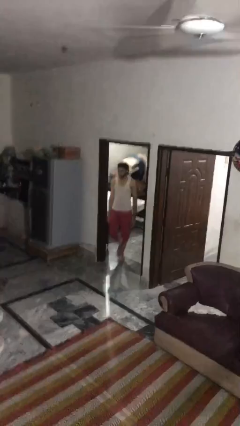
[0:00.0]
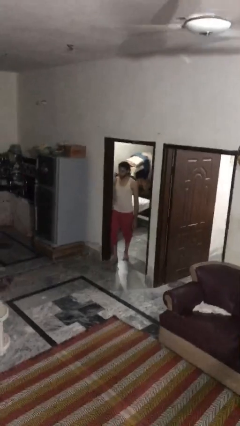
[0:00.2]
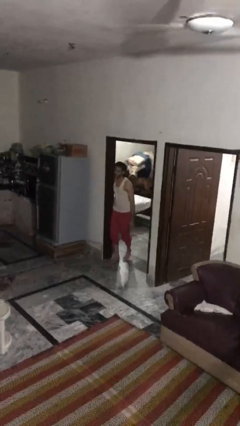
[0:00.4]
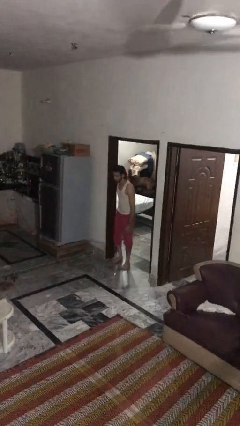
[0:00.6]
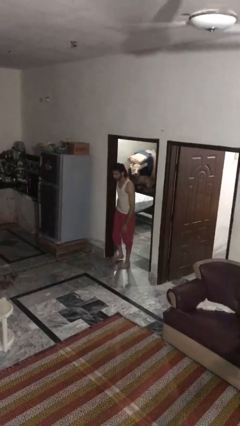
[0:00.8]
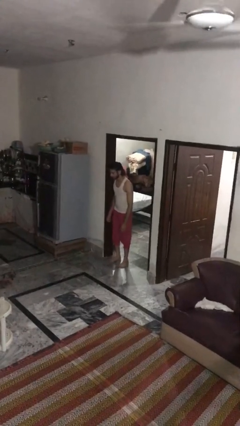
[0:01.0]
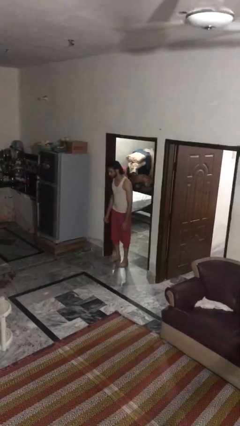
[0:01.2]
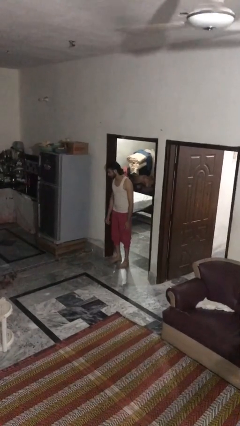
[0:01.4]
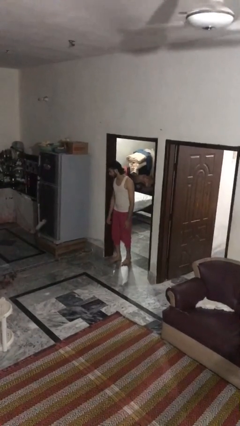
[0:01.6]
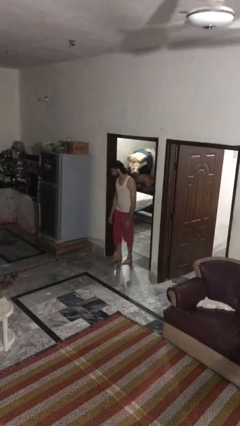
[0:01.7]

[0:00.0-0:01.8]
person bumps into wall

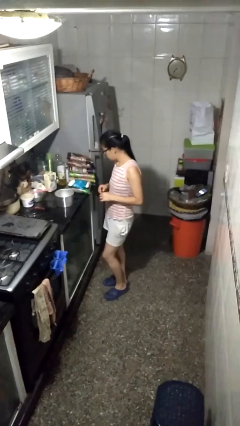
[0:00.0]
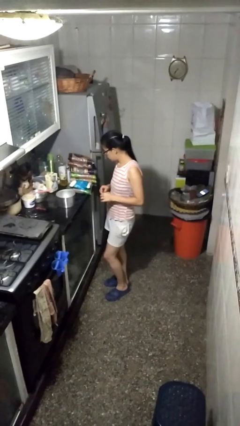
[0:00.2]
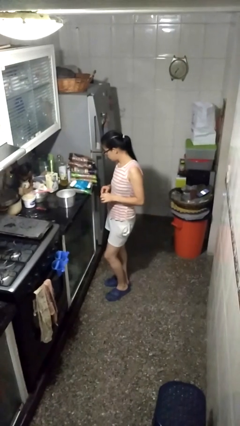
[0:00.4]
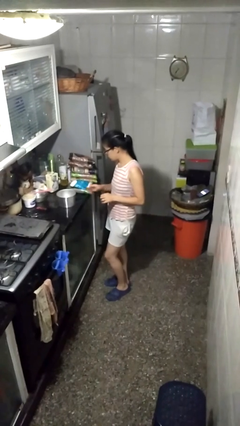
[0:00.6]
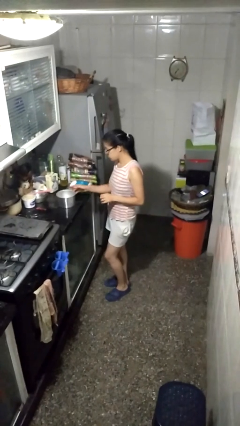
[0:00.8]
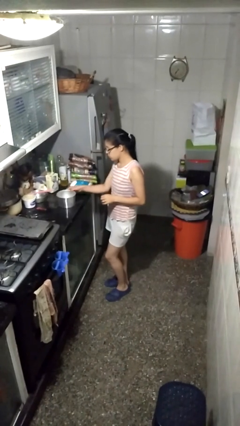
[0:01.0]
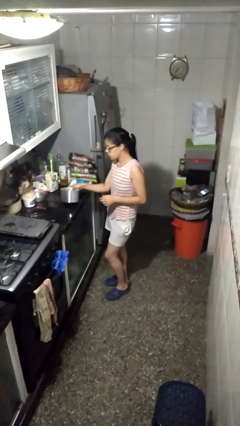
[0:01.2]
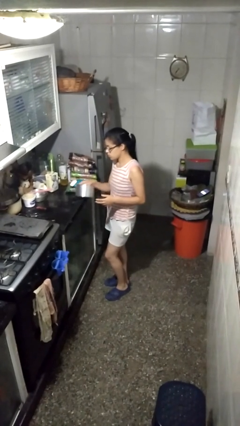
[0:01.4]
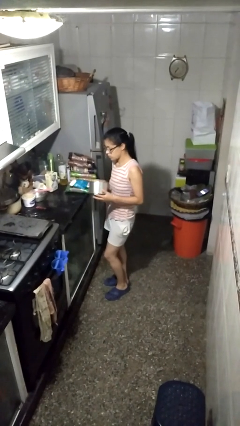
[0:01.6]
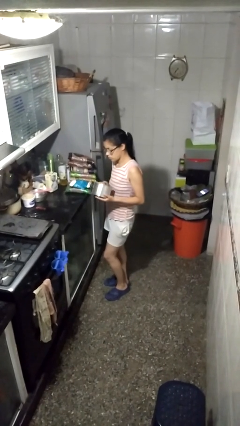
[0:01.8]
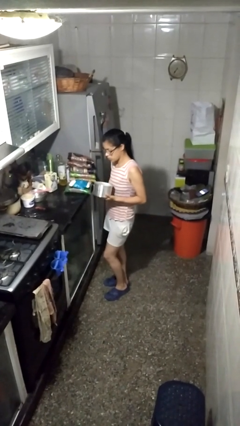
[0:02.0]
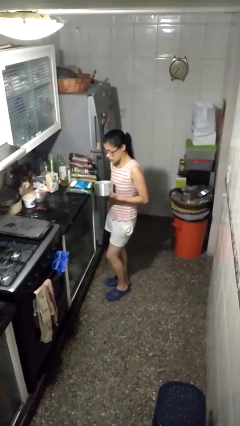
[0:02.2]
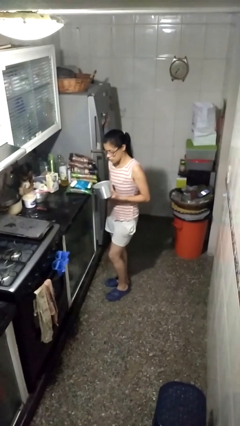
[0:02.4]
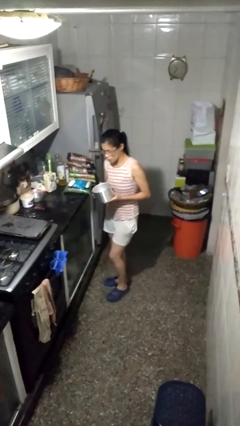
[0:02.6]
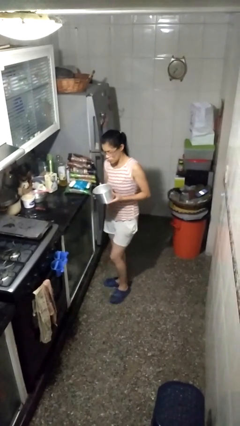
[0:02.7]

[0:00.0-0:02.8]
person picks up object from countertop

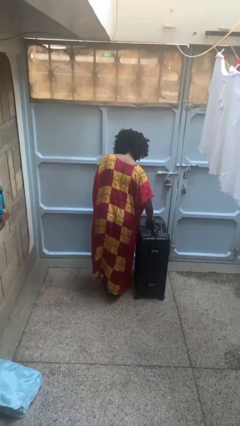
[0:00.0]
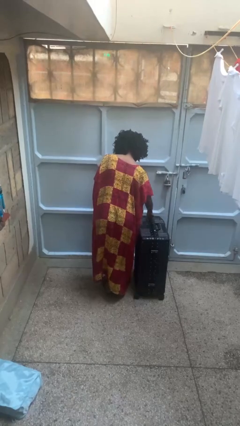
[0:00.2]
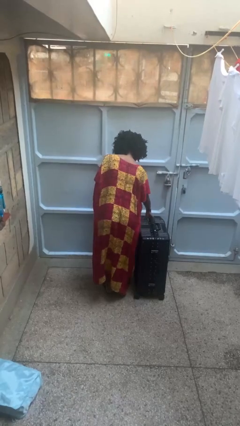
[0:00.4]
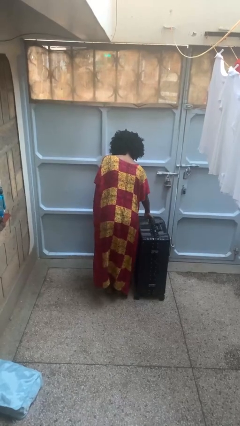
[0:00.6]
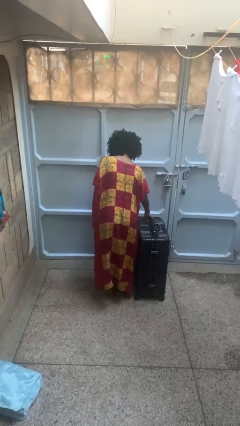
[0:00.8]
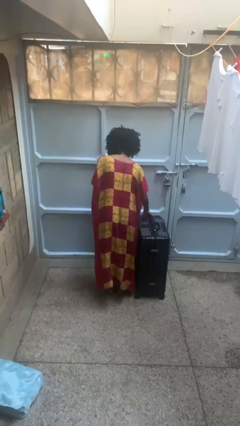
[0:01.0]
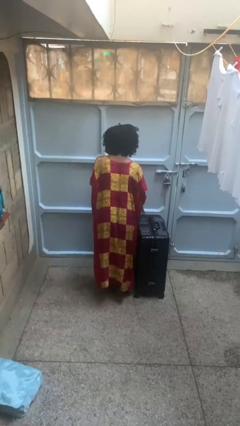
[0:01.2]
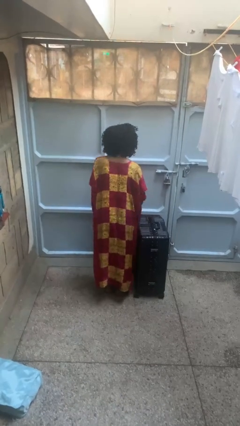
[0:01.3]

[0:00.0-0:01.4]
person closes suitcase

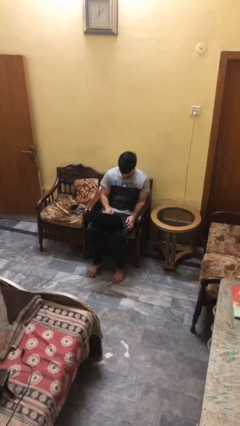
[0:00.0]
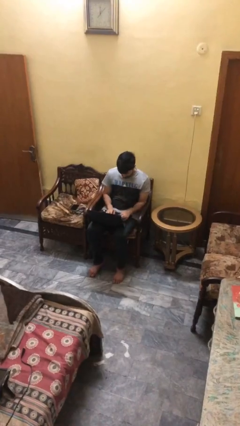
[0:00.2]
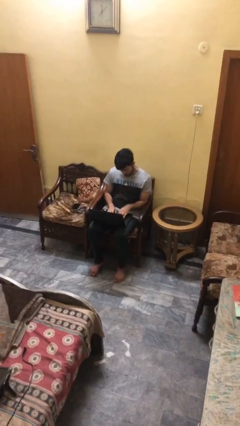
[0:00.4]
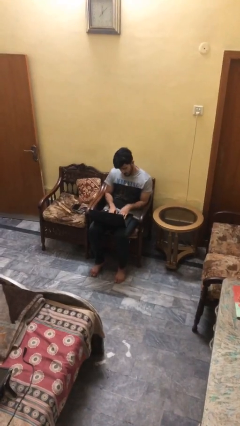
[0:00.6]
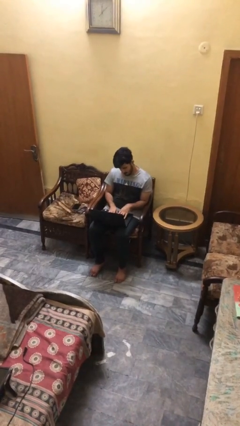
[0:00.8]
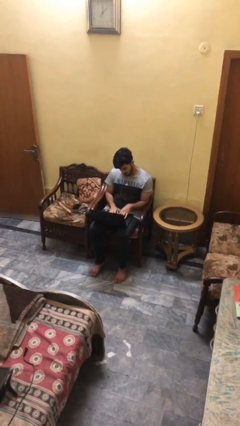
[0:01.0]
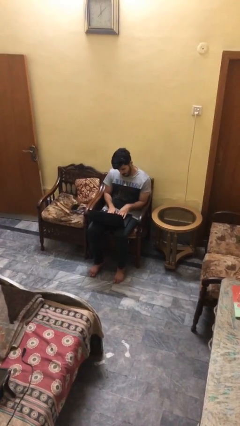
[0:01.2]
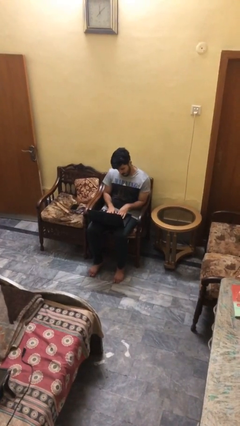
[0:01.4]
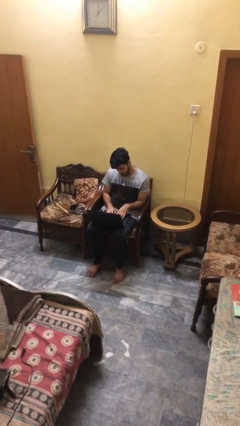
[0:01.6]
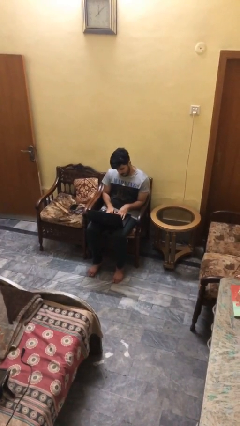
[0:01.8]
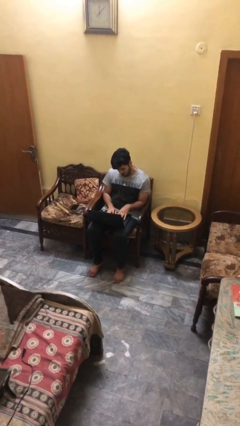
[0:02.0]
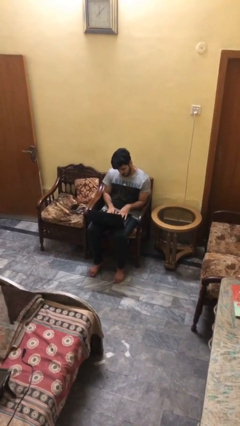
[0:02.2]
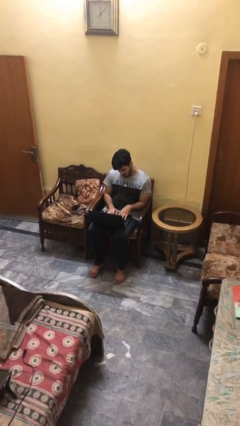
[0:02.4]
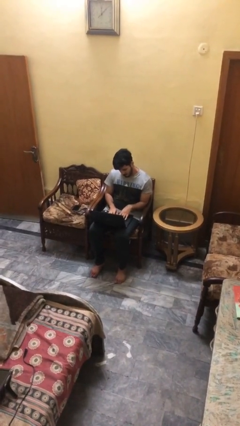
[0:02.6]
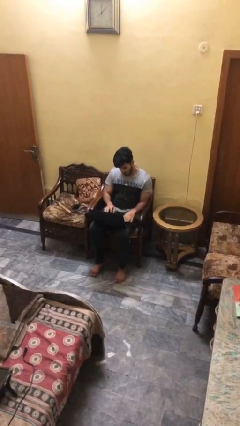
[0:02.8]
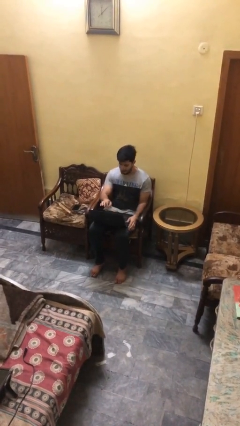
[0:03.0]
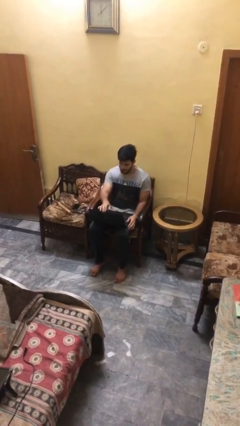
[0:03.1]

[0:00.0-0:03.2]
person interacts with laptop

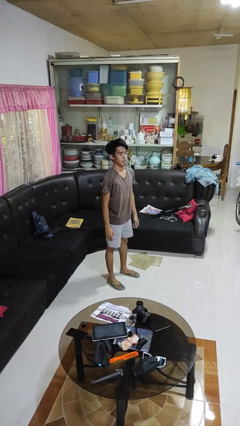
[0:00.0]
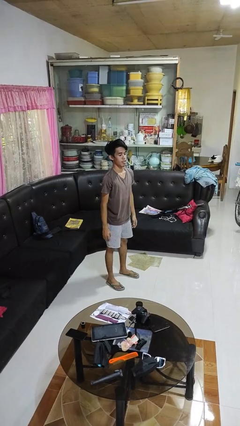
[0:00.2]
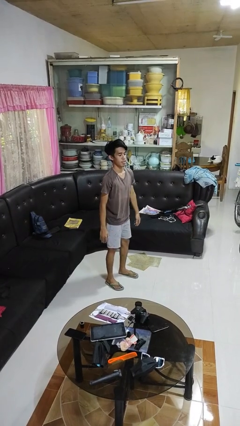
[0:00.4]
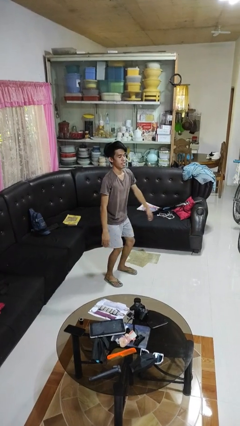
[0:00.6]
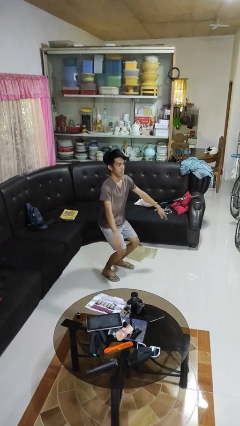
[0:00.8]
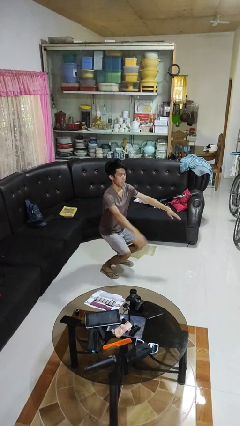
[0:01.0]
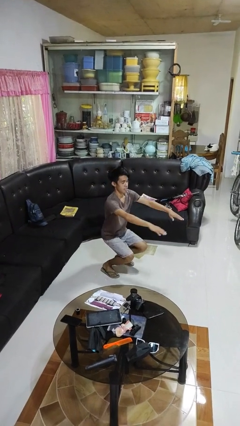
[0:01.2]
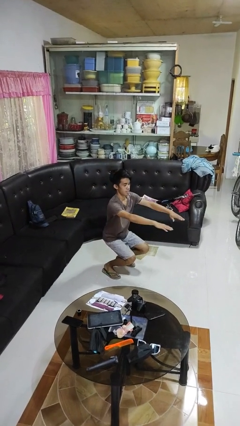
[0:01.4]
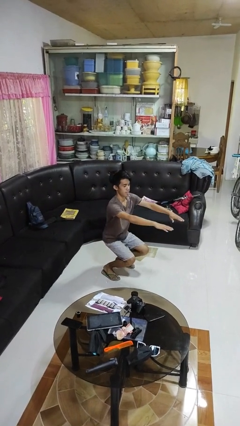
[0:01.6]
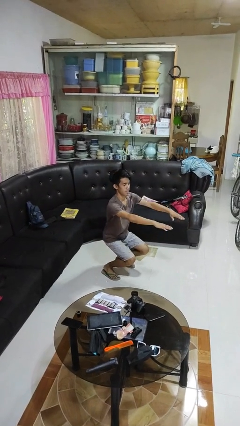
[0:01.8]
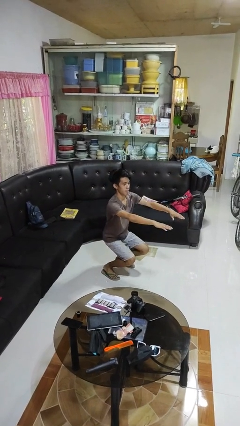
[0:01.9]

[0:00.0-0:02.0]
person squats

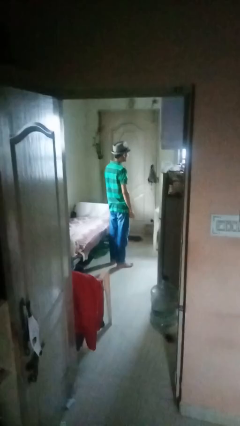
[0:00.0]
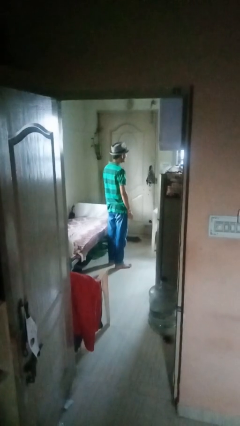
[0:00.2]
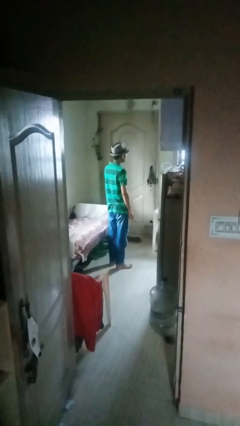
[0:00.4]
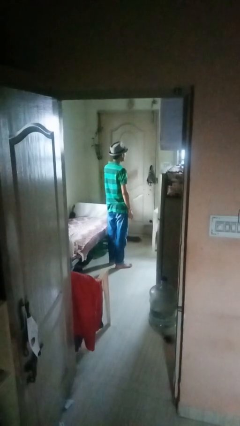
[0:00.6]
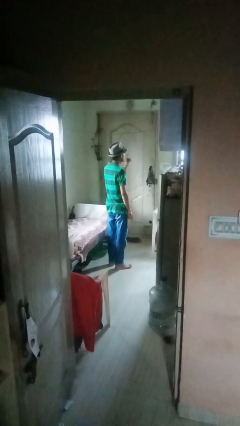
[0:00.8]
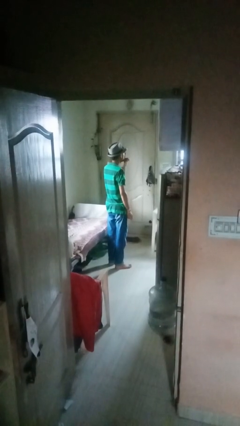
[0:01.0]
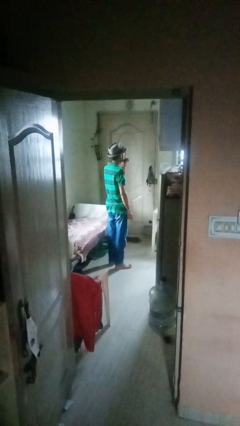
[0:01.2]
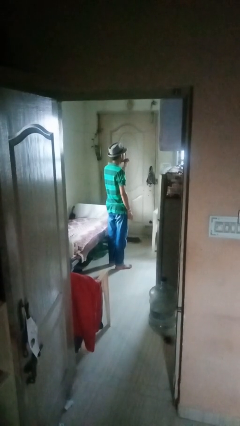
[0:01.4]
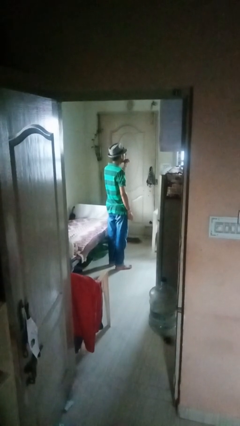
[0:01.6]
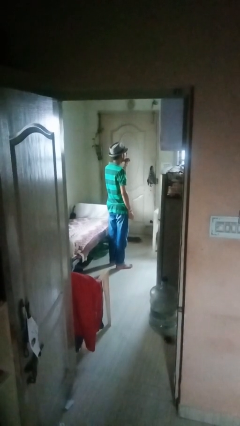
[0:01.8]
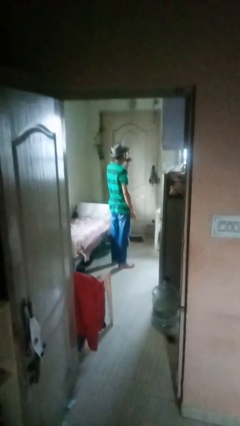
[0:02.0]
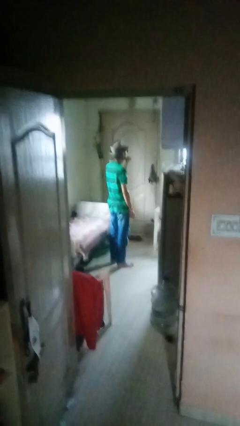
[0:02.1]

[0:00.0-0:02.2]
person gestures be quiet

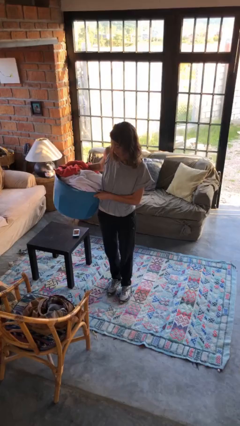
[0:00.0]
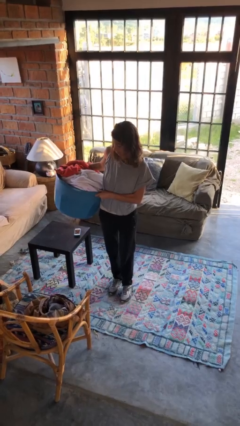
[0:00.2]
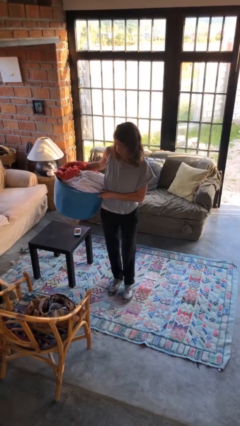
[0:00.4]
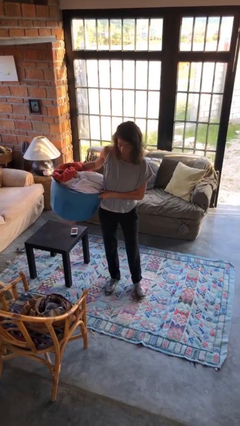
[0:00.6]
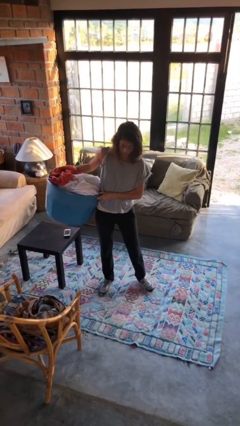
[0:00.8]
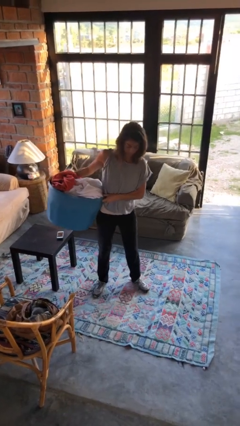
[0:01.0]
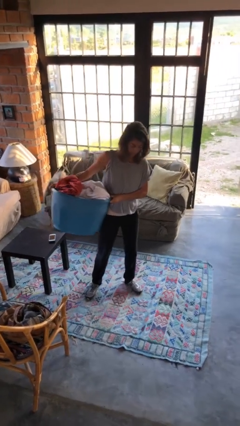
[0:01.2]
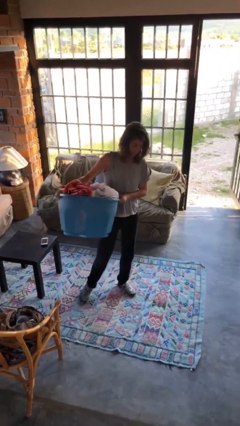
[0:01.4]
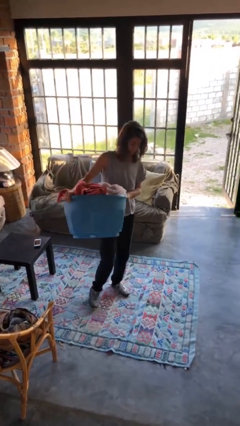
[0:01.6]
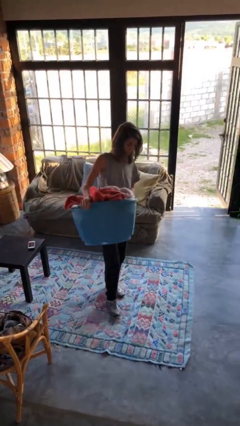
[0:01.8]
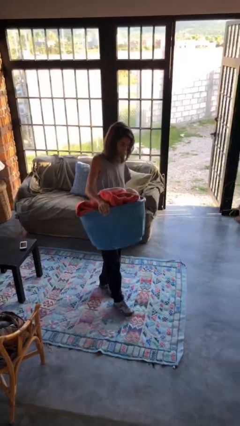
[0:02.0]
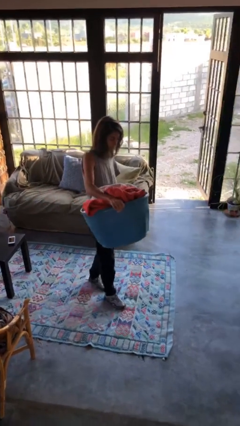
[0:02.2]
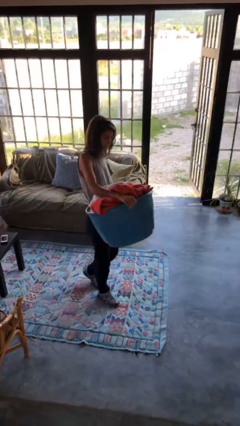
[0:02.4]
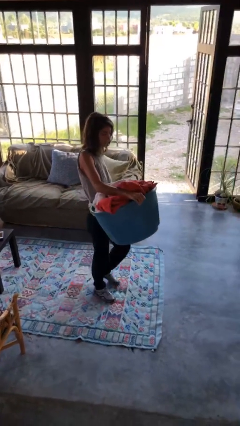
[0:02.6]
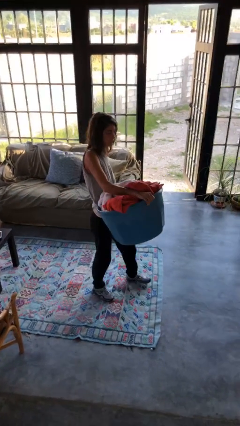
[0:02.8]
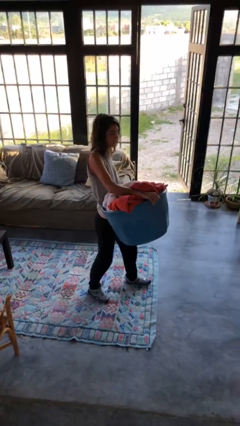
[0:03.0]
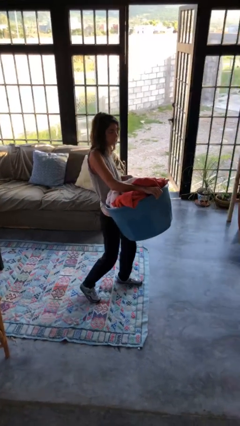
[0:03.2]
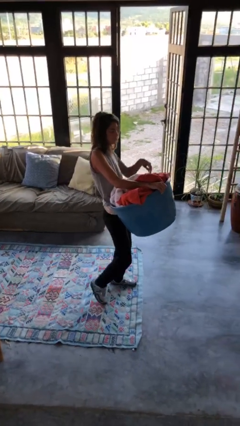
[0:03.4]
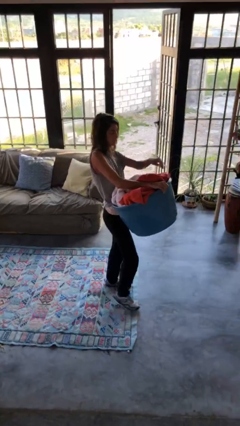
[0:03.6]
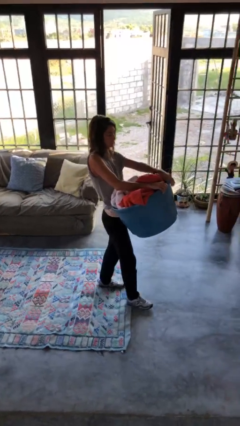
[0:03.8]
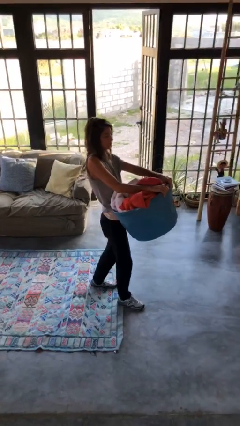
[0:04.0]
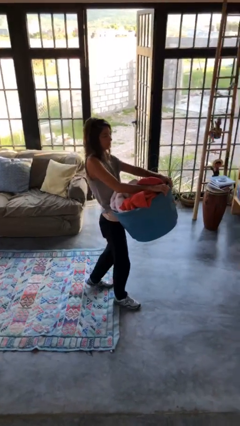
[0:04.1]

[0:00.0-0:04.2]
person carries laundry basket
